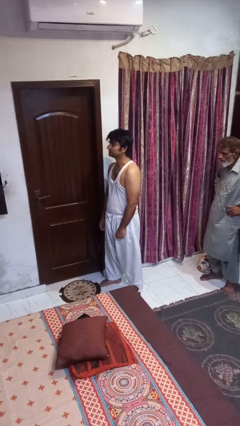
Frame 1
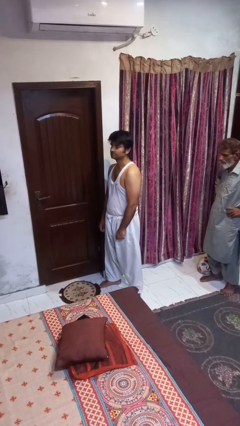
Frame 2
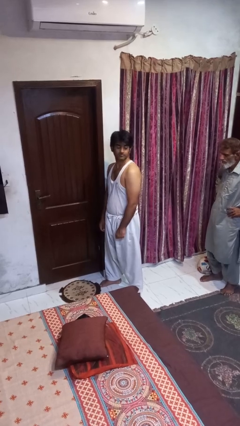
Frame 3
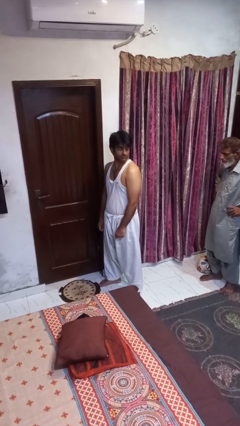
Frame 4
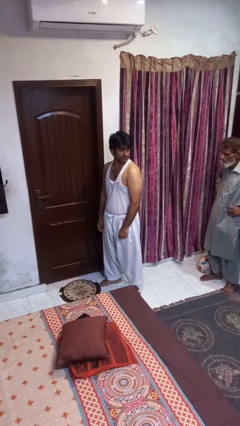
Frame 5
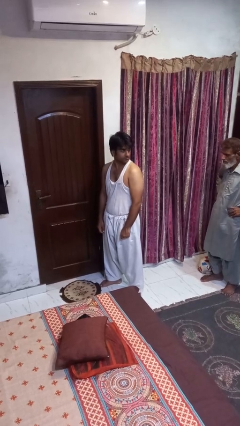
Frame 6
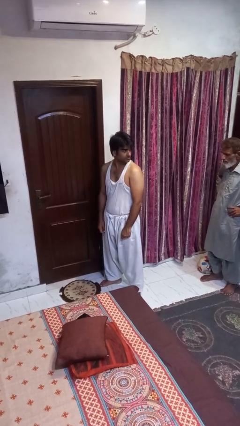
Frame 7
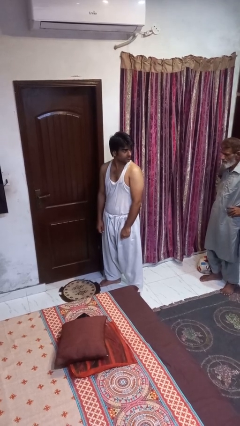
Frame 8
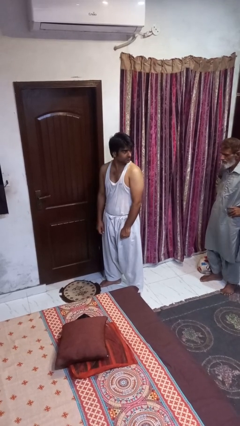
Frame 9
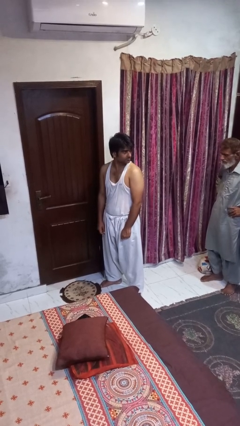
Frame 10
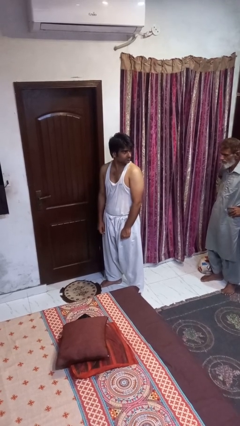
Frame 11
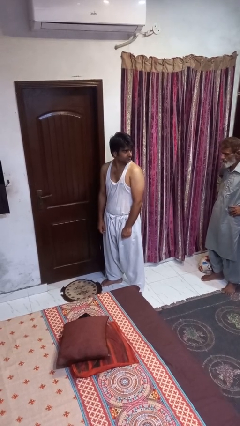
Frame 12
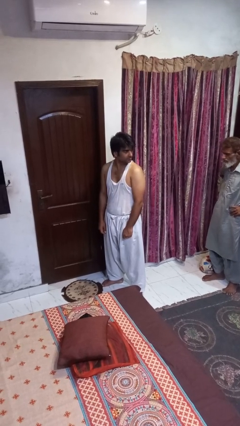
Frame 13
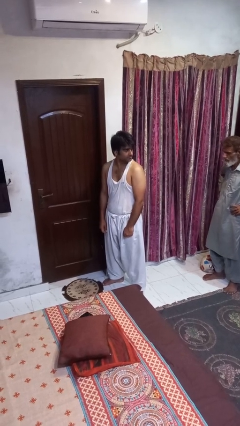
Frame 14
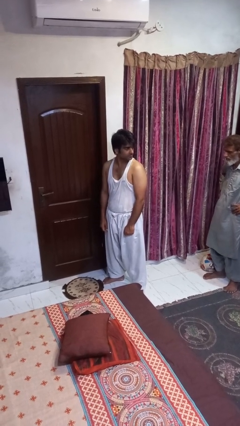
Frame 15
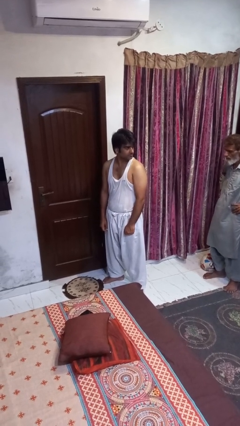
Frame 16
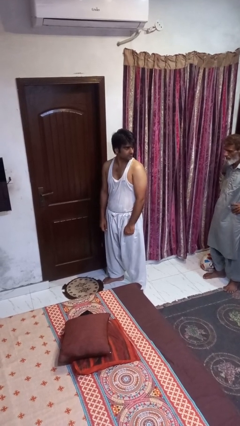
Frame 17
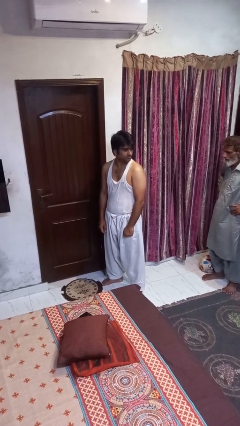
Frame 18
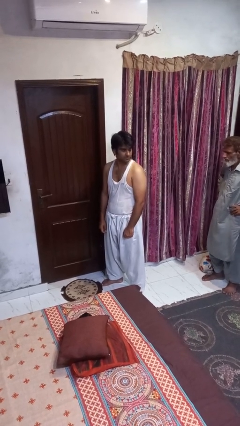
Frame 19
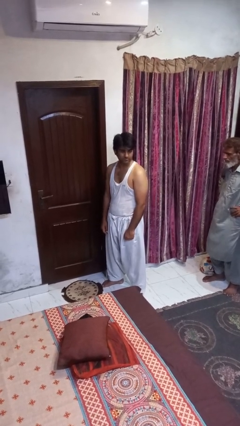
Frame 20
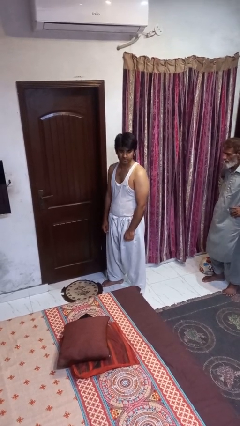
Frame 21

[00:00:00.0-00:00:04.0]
person looks over shoulder

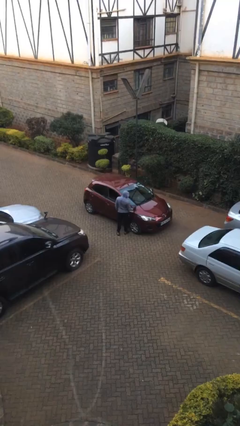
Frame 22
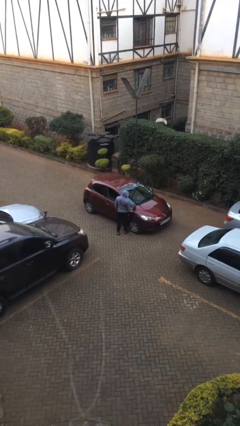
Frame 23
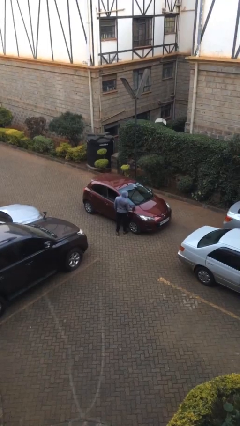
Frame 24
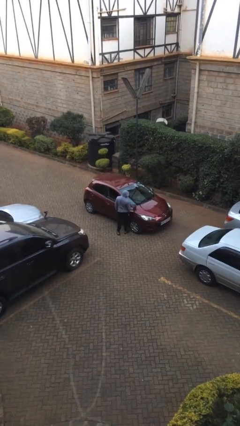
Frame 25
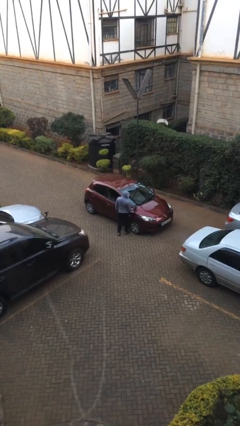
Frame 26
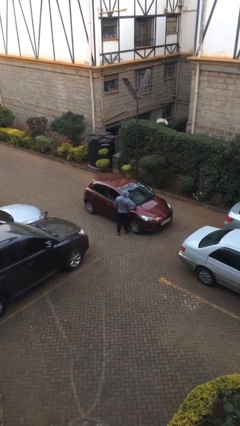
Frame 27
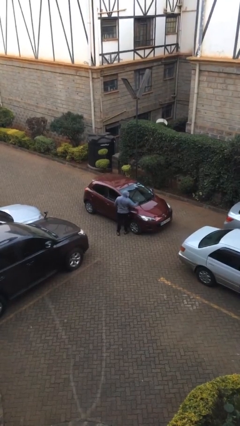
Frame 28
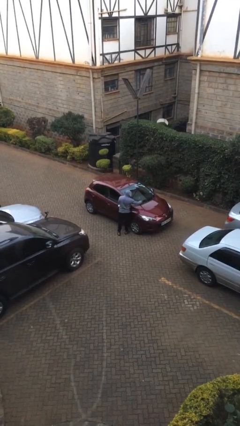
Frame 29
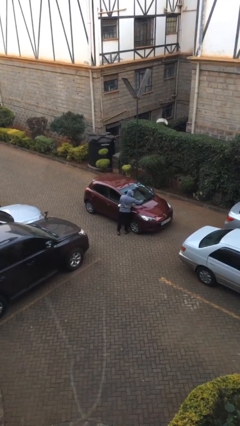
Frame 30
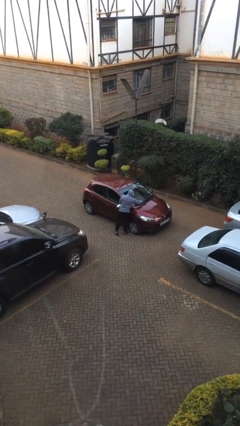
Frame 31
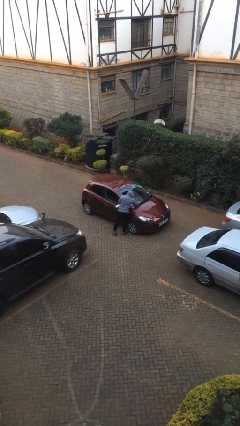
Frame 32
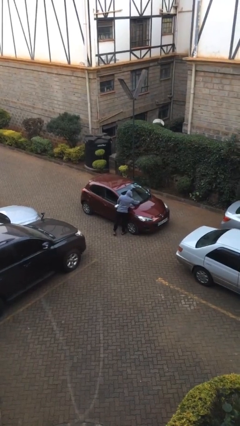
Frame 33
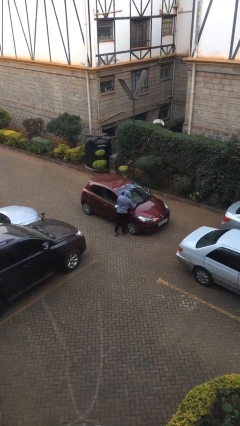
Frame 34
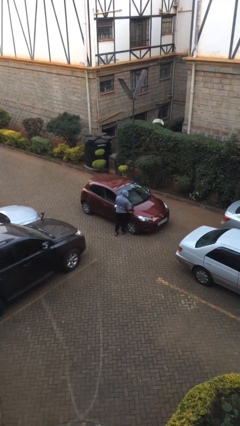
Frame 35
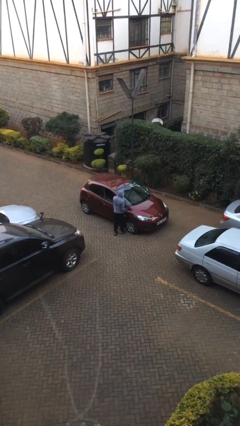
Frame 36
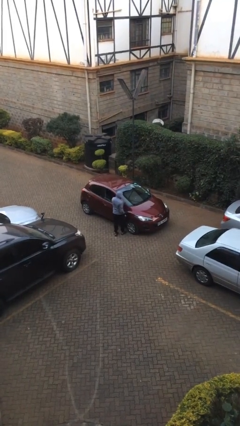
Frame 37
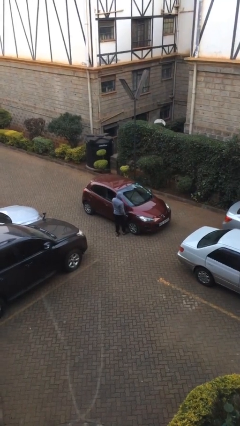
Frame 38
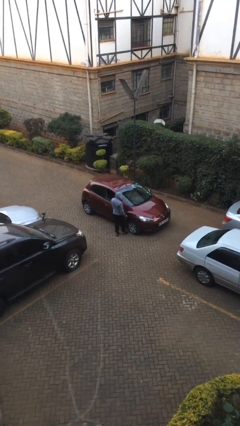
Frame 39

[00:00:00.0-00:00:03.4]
person flips down car wipers

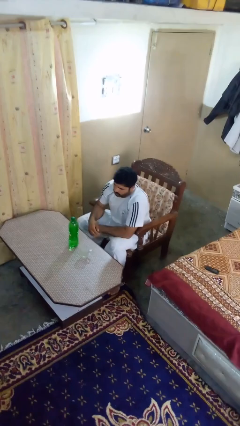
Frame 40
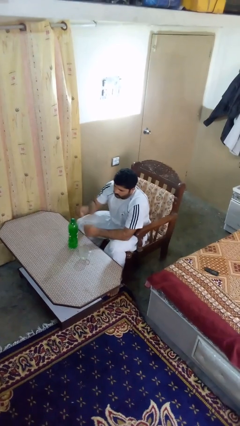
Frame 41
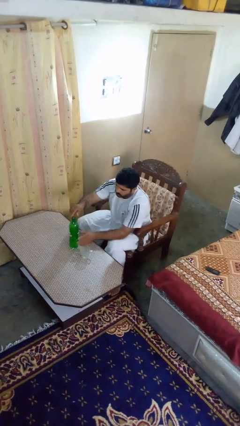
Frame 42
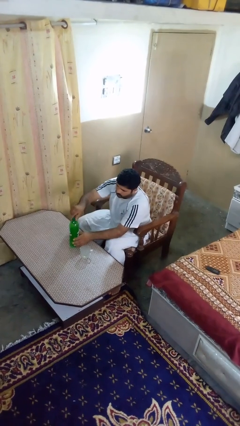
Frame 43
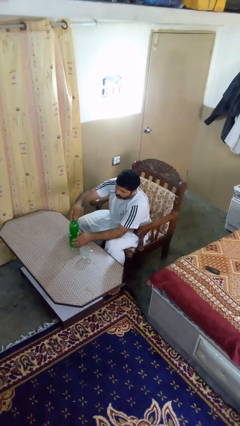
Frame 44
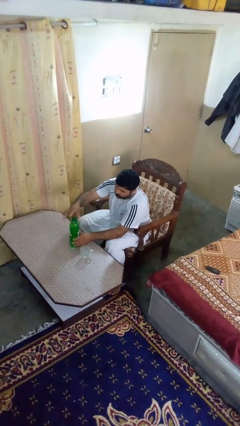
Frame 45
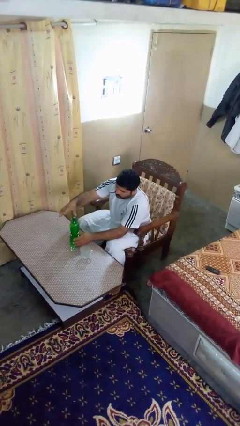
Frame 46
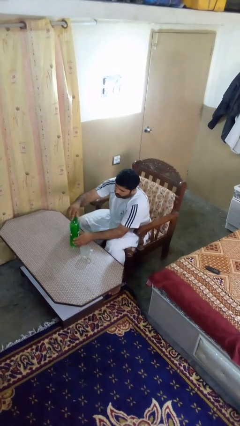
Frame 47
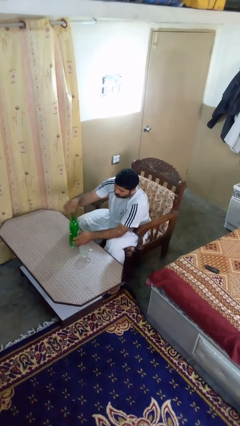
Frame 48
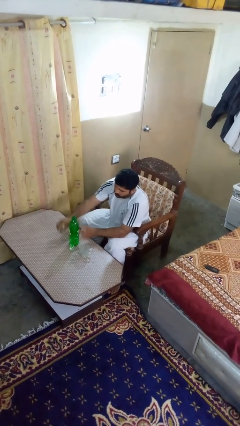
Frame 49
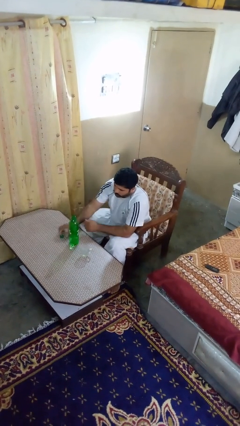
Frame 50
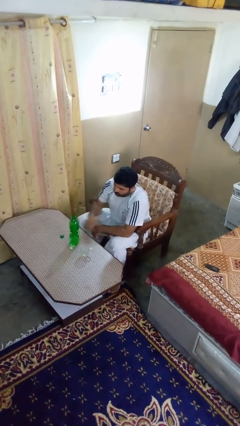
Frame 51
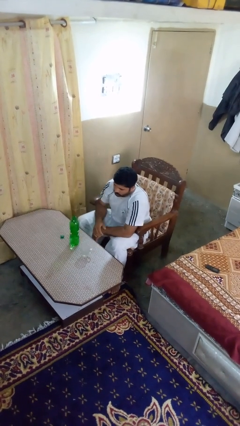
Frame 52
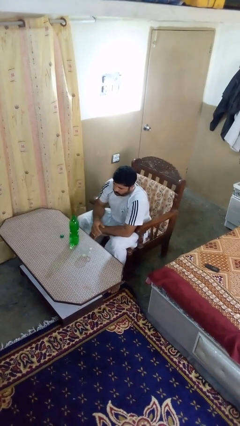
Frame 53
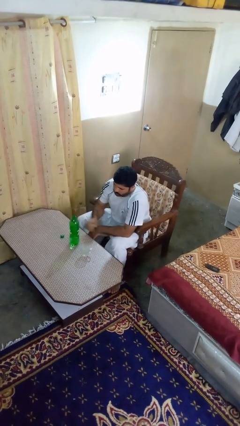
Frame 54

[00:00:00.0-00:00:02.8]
person unscrews lid from bottle

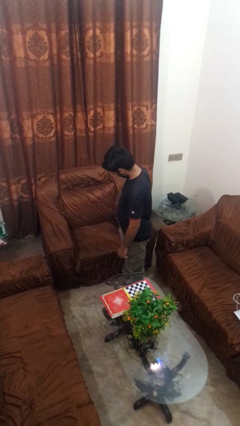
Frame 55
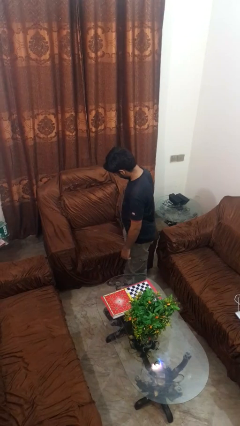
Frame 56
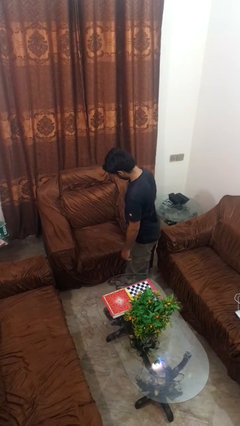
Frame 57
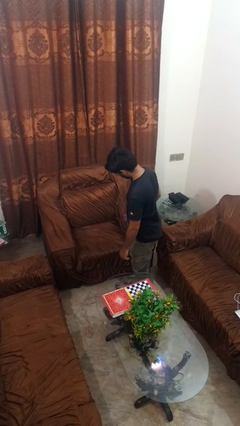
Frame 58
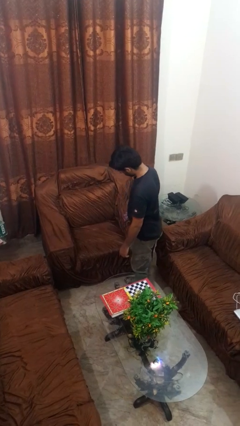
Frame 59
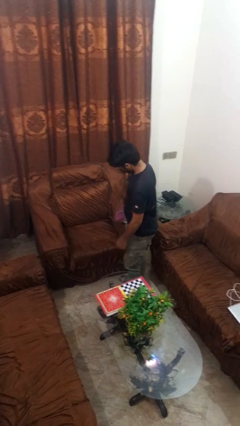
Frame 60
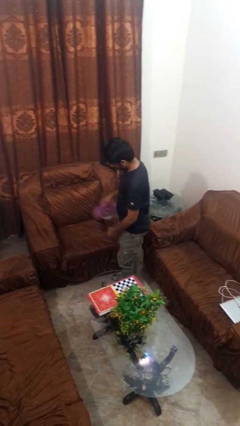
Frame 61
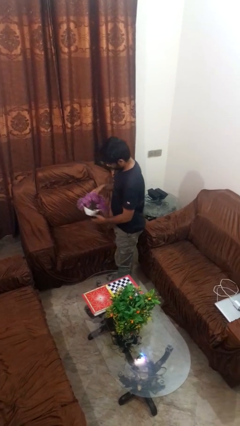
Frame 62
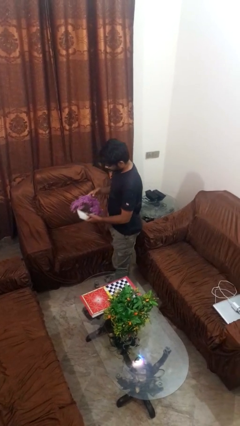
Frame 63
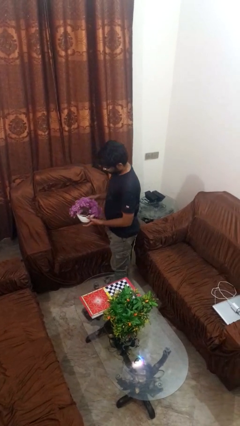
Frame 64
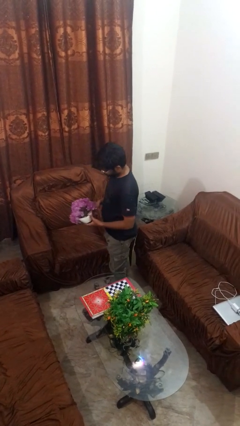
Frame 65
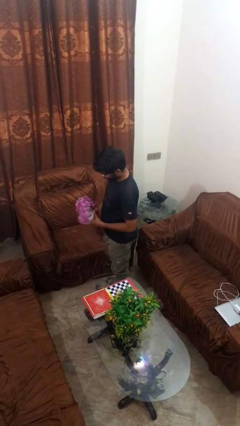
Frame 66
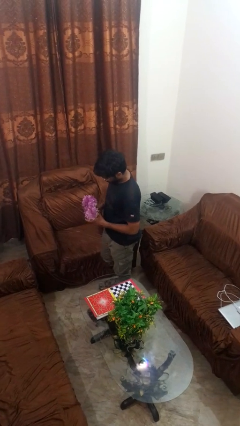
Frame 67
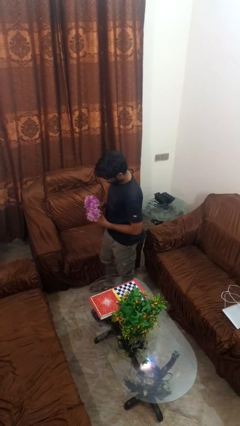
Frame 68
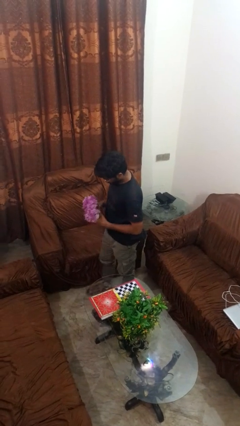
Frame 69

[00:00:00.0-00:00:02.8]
person picks up object from couch

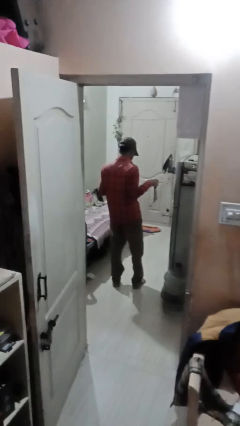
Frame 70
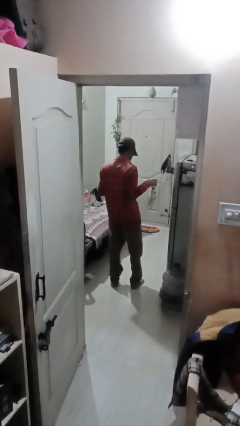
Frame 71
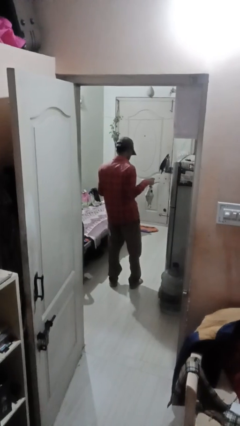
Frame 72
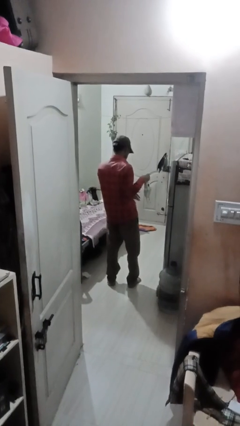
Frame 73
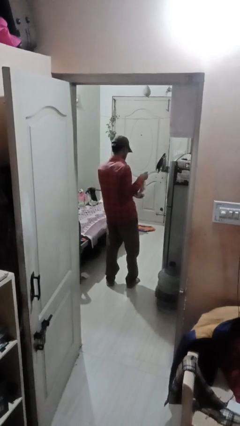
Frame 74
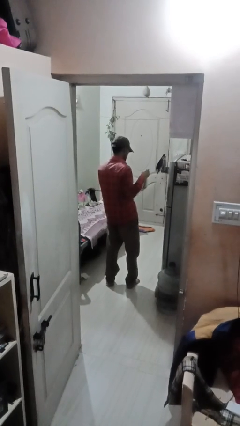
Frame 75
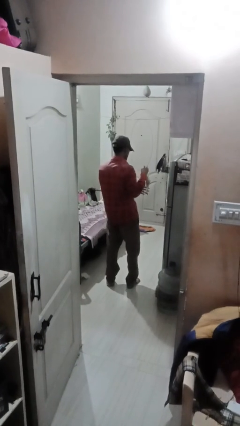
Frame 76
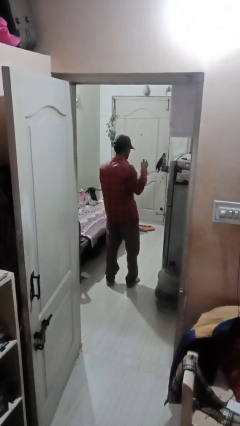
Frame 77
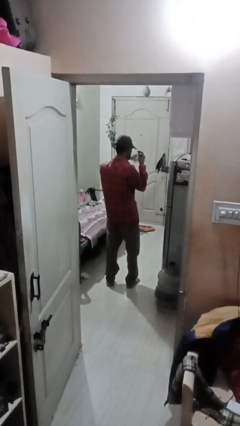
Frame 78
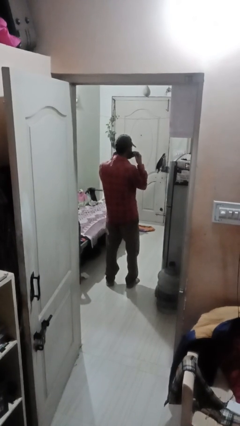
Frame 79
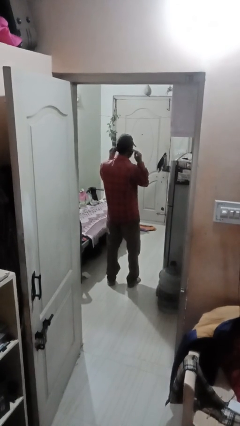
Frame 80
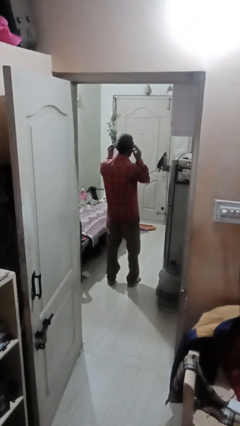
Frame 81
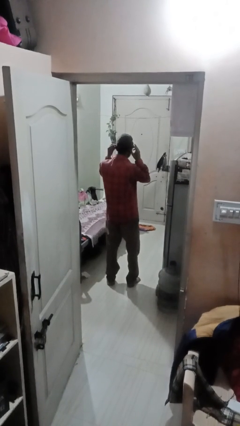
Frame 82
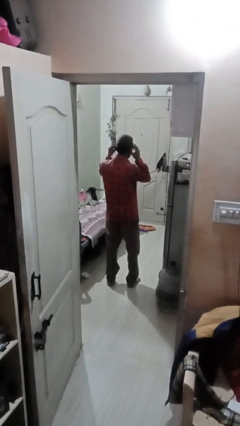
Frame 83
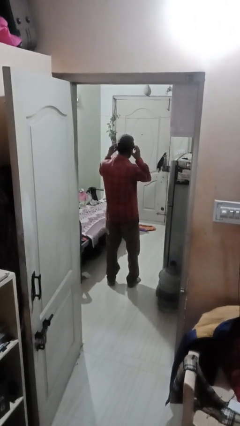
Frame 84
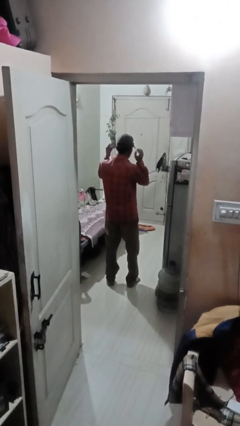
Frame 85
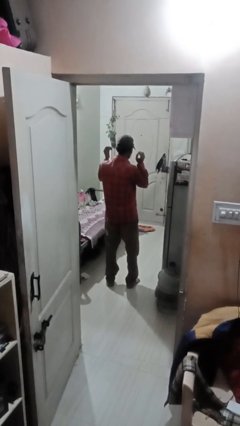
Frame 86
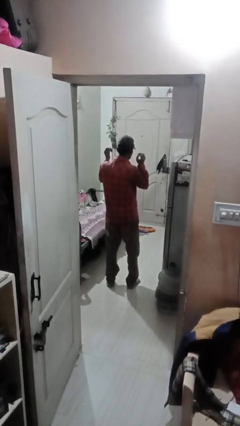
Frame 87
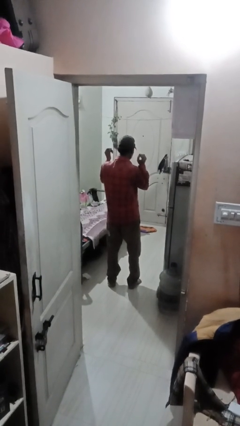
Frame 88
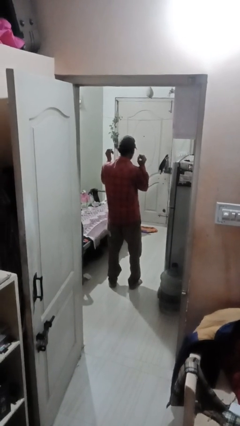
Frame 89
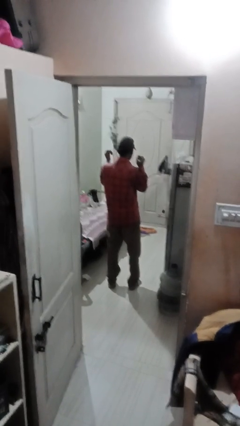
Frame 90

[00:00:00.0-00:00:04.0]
person puts on facemask

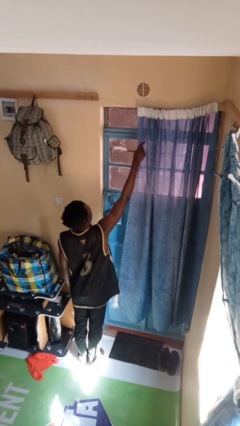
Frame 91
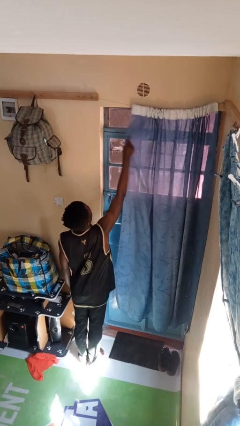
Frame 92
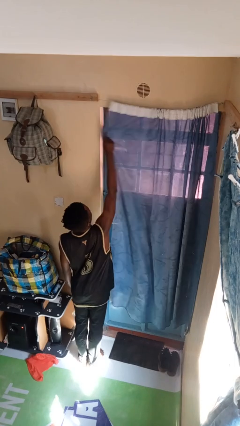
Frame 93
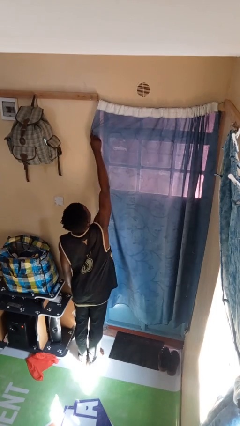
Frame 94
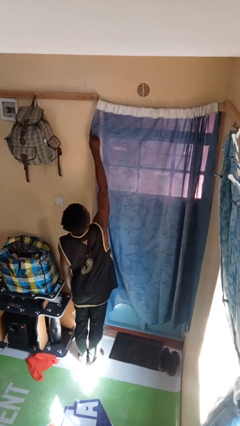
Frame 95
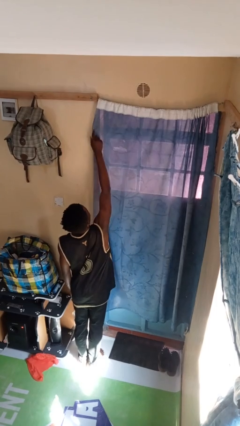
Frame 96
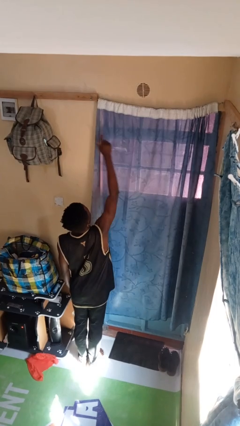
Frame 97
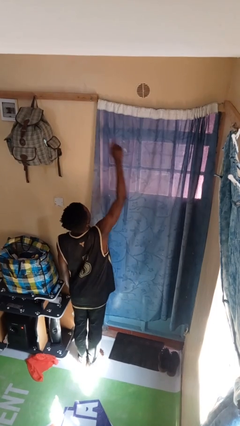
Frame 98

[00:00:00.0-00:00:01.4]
person closes curtains
